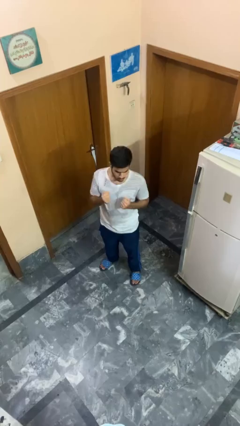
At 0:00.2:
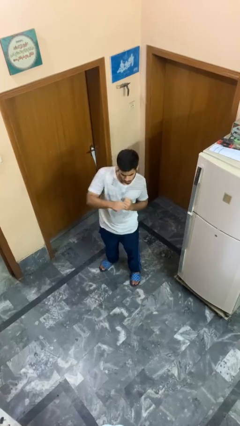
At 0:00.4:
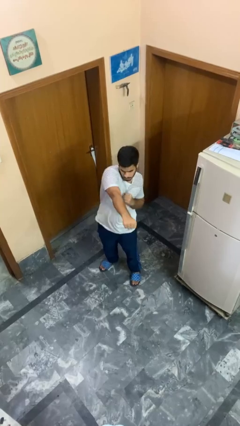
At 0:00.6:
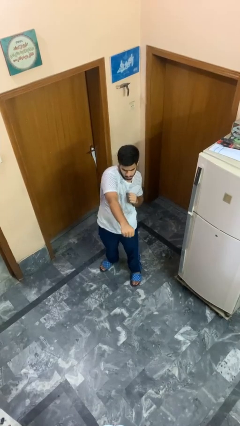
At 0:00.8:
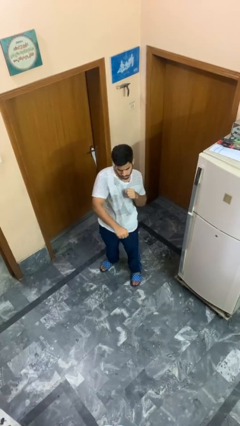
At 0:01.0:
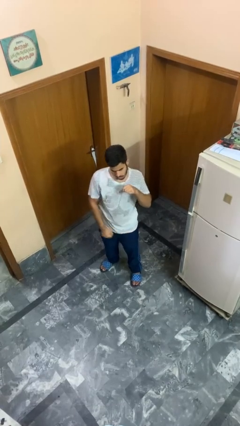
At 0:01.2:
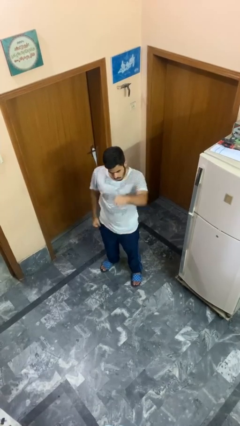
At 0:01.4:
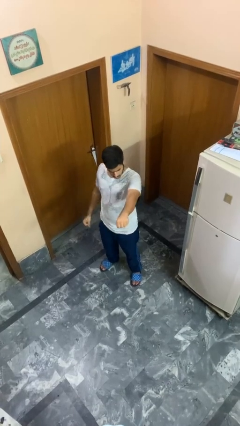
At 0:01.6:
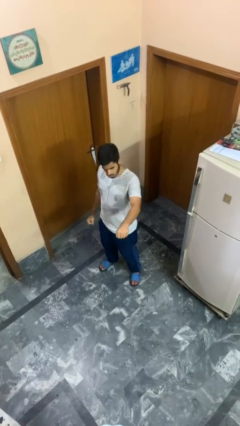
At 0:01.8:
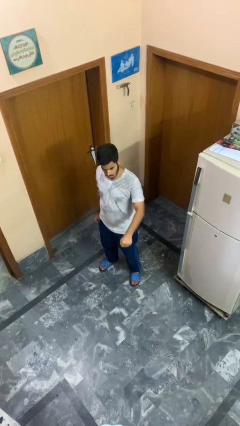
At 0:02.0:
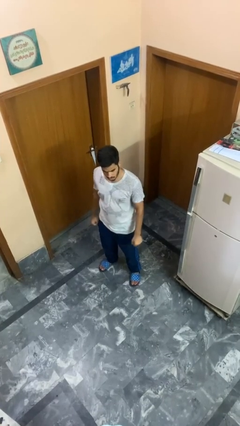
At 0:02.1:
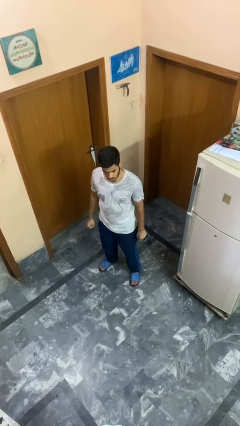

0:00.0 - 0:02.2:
person punches

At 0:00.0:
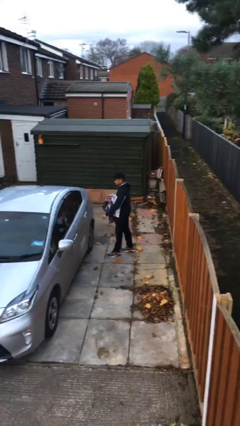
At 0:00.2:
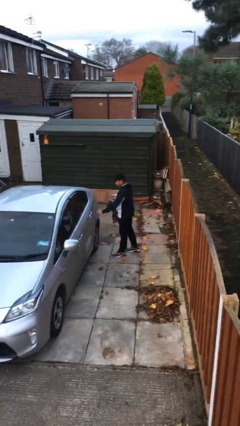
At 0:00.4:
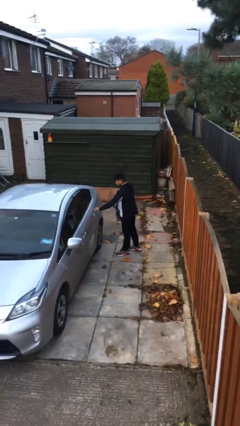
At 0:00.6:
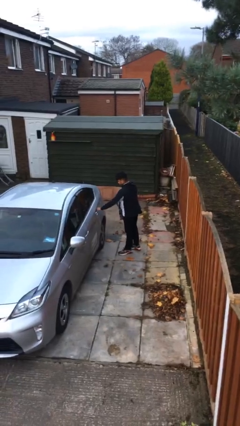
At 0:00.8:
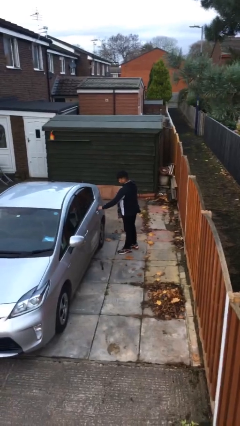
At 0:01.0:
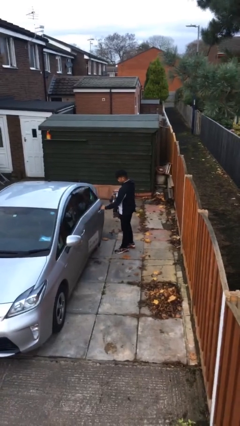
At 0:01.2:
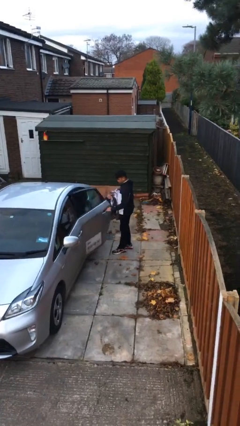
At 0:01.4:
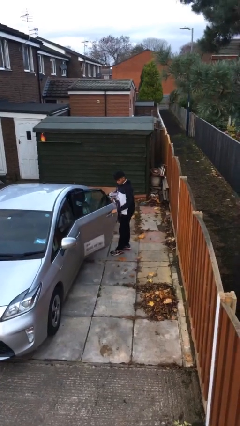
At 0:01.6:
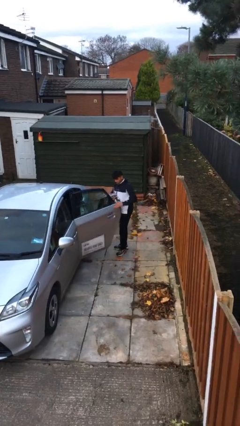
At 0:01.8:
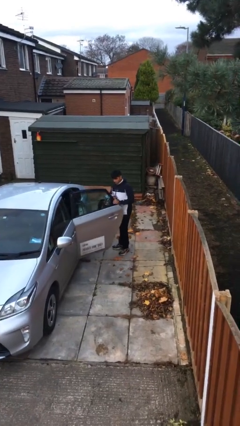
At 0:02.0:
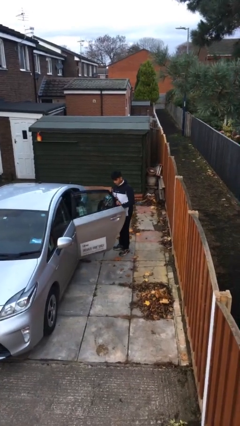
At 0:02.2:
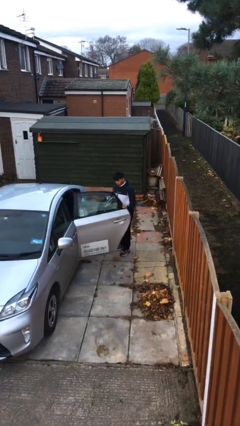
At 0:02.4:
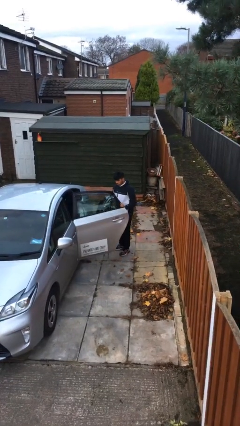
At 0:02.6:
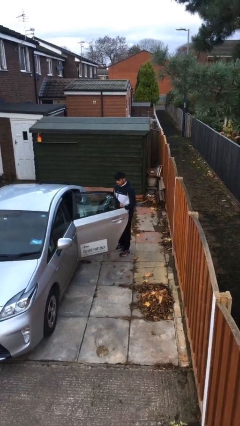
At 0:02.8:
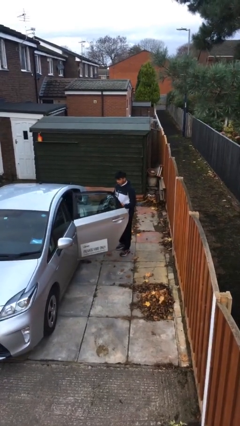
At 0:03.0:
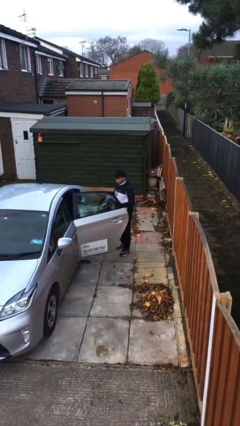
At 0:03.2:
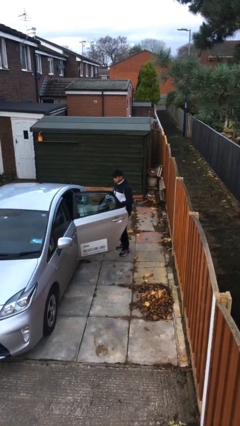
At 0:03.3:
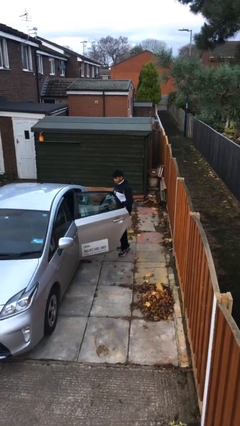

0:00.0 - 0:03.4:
person opens car door

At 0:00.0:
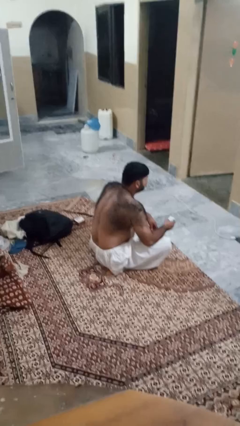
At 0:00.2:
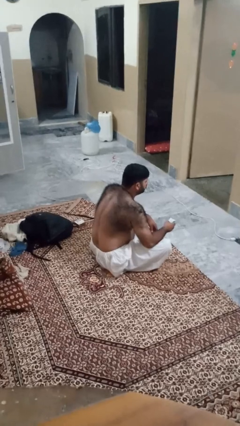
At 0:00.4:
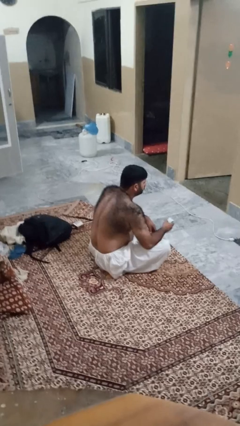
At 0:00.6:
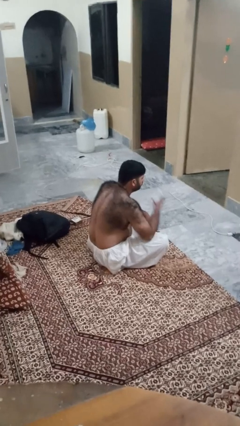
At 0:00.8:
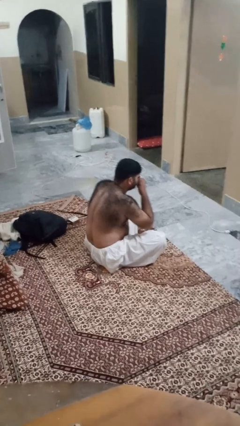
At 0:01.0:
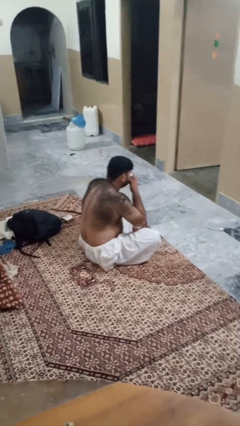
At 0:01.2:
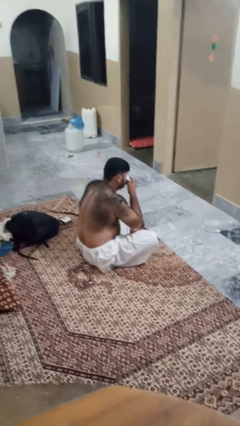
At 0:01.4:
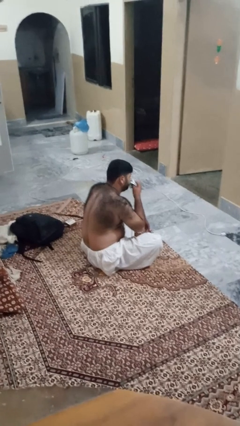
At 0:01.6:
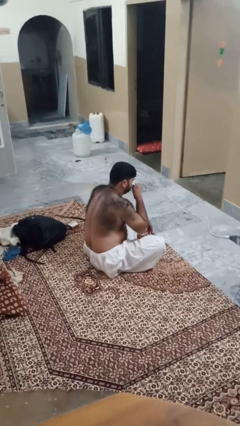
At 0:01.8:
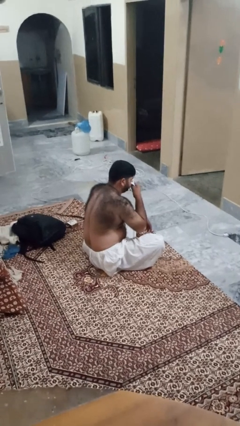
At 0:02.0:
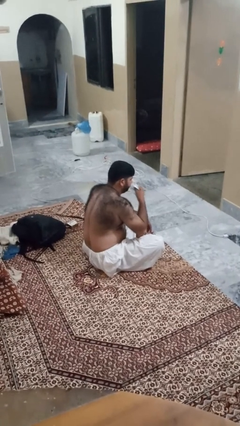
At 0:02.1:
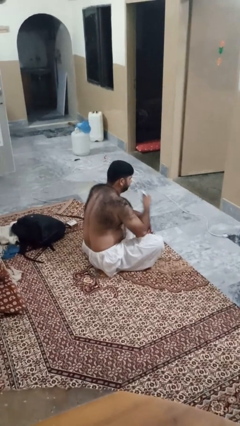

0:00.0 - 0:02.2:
person blows nose

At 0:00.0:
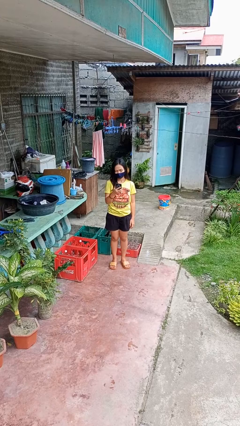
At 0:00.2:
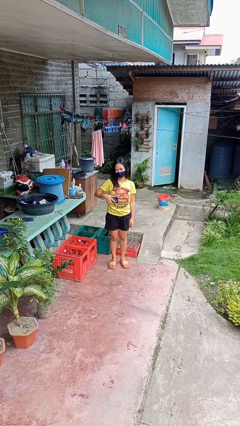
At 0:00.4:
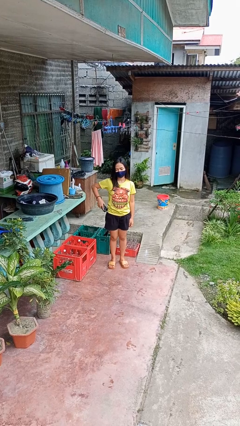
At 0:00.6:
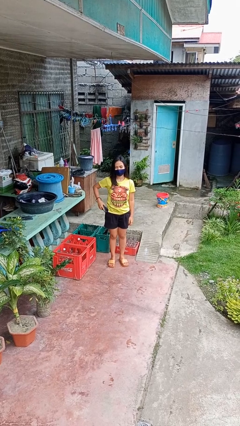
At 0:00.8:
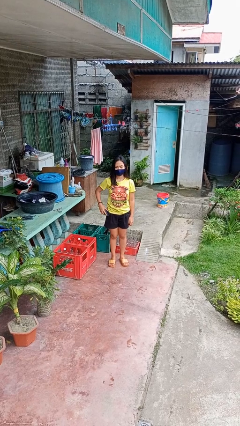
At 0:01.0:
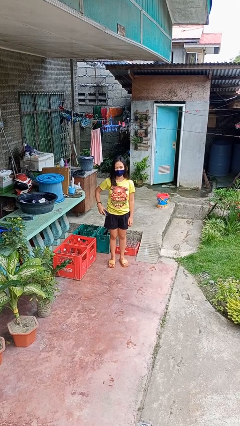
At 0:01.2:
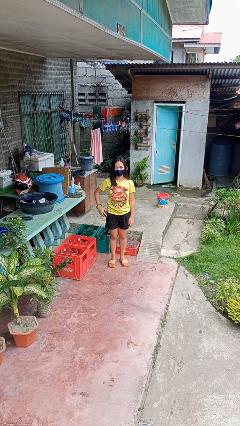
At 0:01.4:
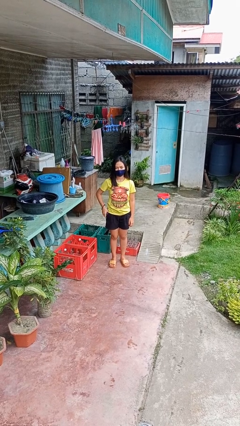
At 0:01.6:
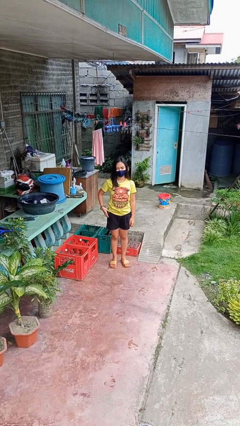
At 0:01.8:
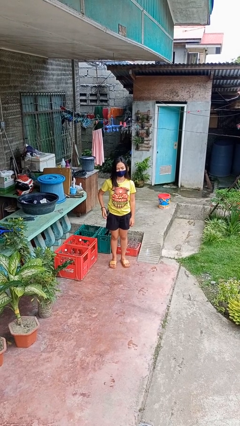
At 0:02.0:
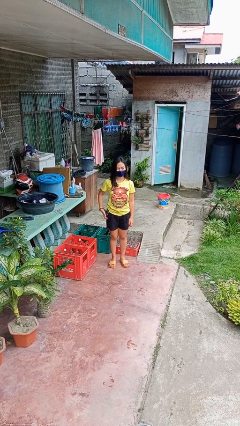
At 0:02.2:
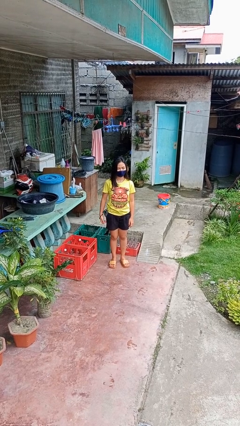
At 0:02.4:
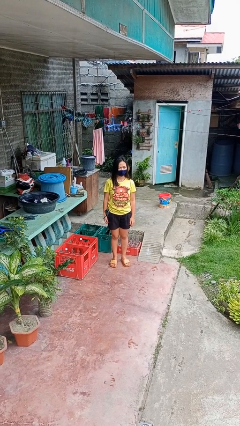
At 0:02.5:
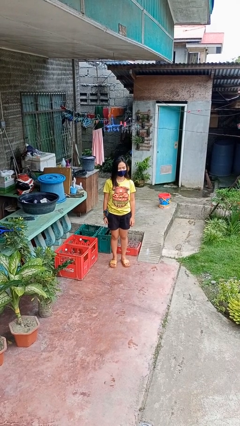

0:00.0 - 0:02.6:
person puts phone into pocket

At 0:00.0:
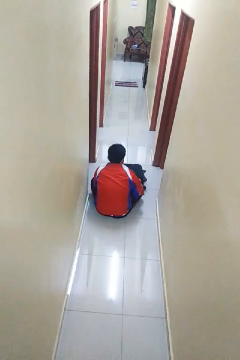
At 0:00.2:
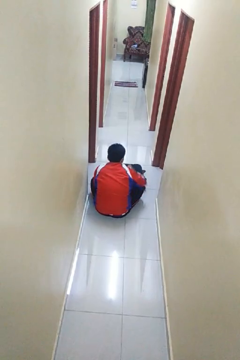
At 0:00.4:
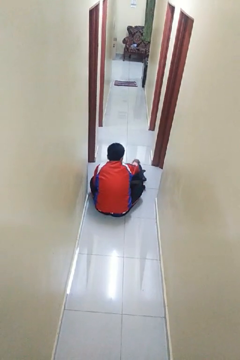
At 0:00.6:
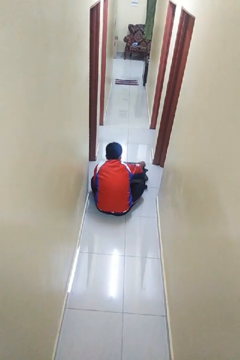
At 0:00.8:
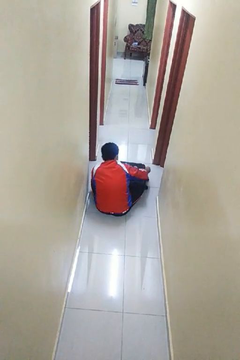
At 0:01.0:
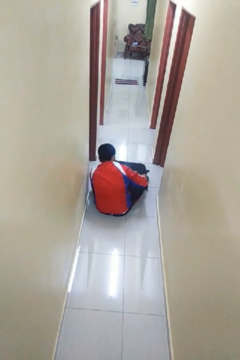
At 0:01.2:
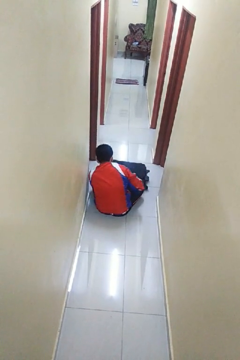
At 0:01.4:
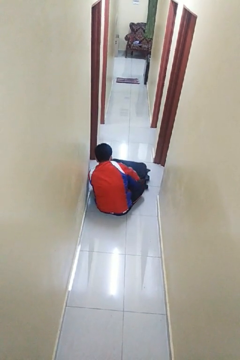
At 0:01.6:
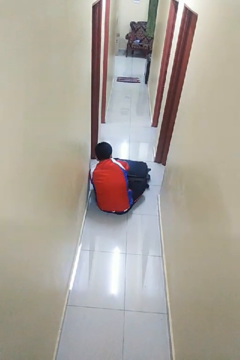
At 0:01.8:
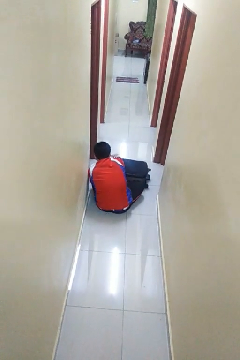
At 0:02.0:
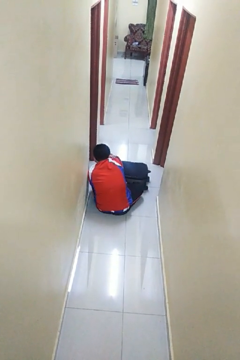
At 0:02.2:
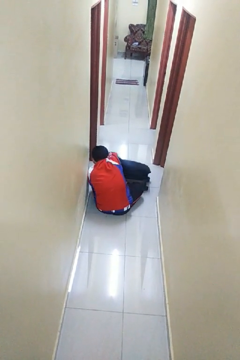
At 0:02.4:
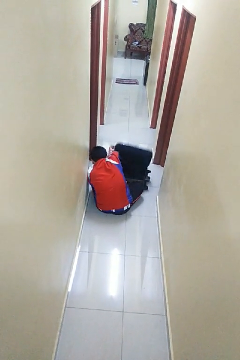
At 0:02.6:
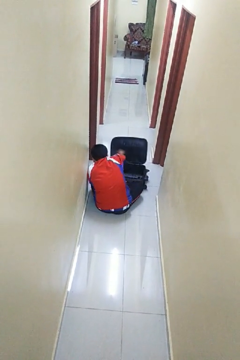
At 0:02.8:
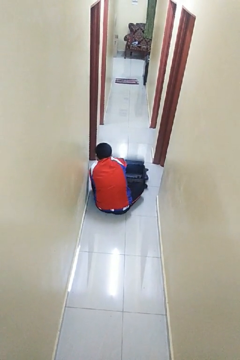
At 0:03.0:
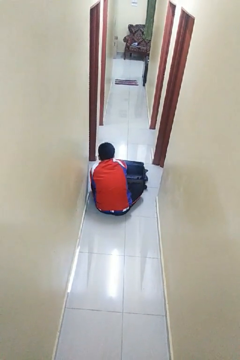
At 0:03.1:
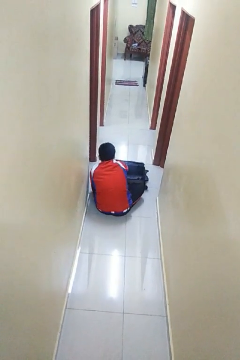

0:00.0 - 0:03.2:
person opens suitcase

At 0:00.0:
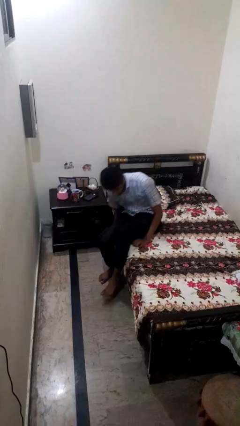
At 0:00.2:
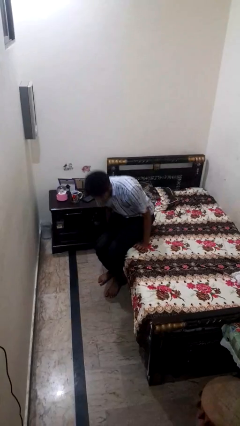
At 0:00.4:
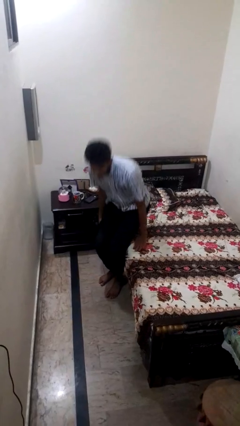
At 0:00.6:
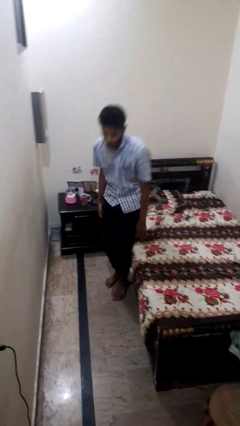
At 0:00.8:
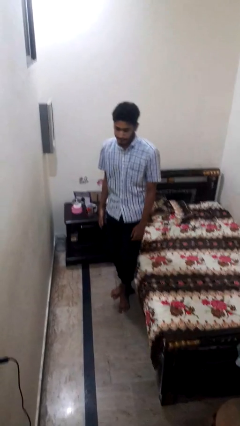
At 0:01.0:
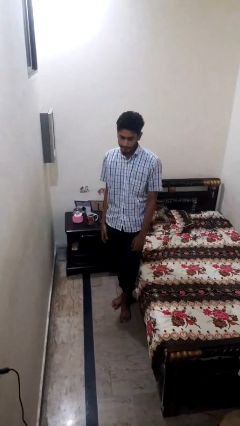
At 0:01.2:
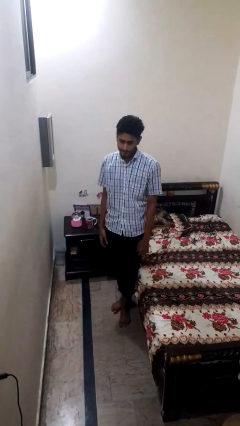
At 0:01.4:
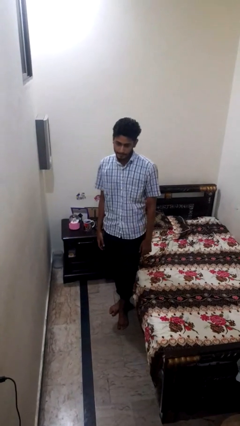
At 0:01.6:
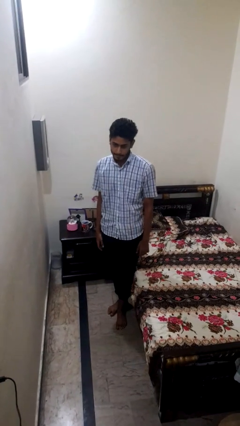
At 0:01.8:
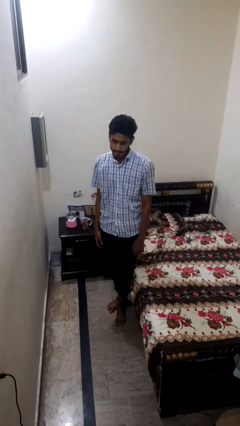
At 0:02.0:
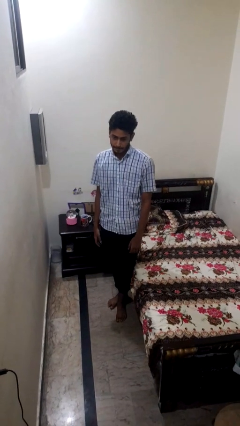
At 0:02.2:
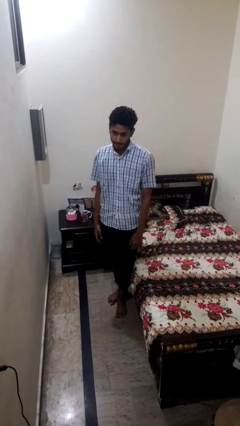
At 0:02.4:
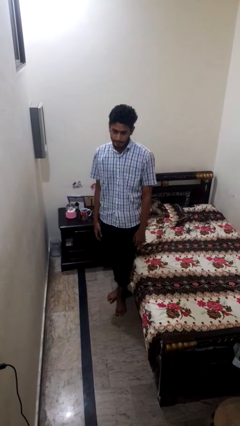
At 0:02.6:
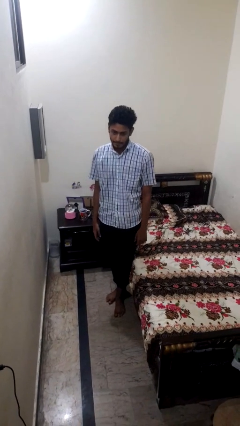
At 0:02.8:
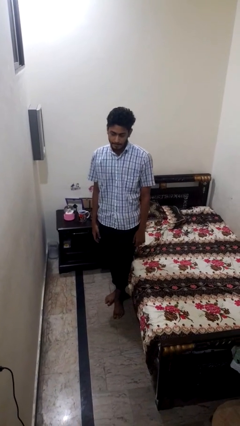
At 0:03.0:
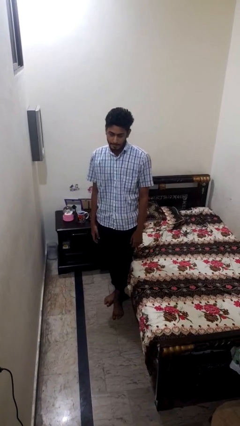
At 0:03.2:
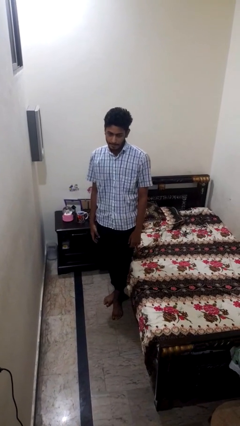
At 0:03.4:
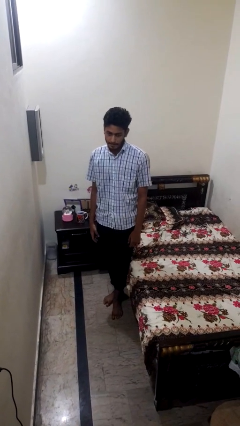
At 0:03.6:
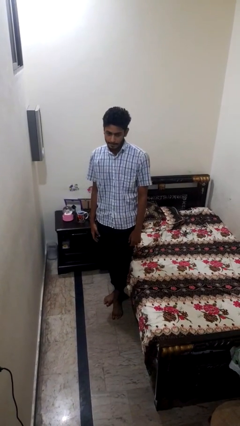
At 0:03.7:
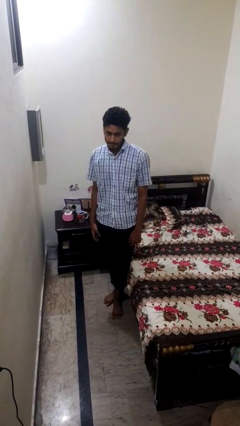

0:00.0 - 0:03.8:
person stands up

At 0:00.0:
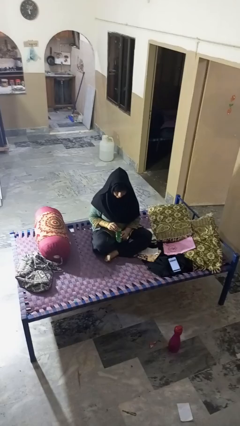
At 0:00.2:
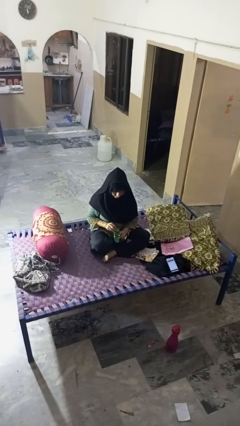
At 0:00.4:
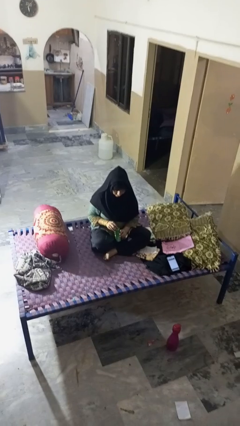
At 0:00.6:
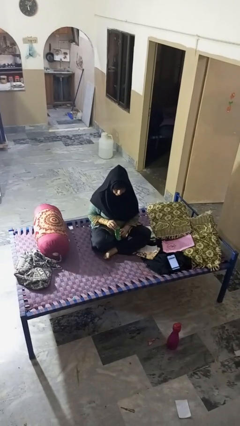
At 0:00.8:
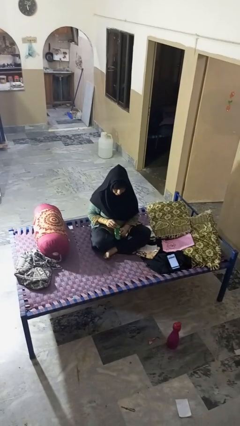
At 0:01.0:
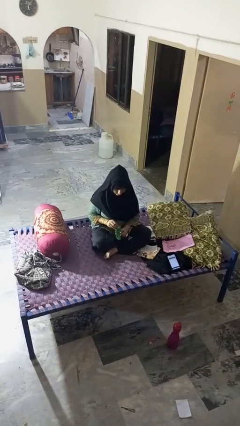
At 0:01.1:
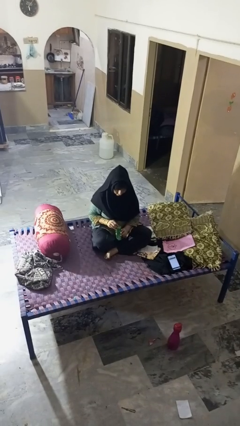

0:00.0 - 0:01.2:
person opens can with can opener
